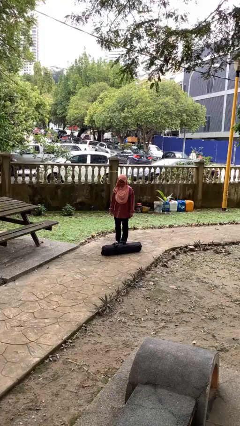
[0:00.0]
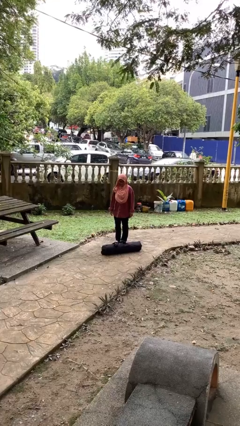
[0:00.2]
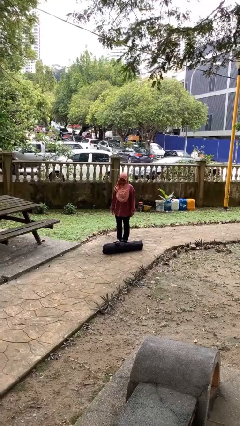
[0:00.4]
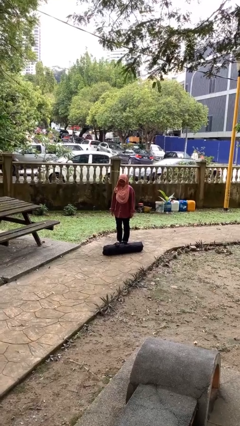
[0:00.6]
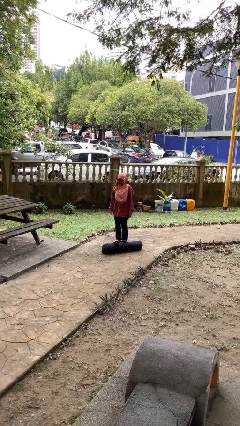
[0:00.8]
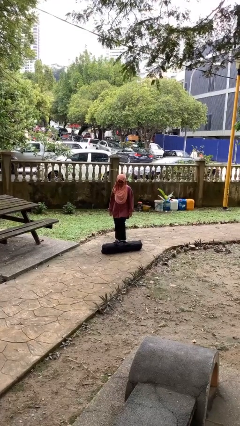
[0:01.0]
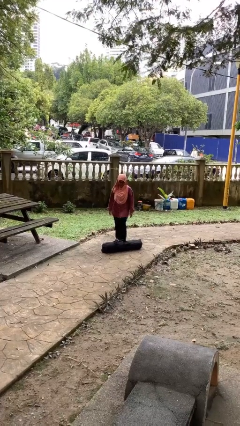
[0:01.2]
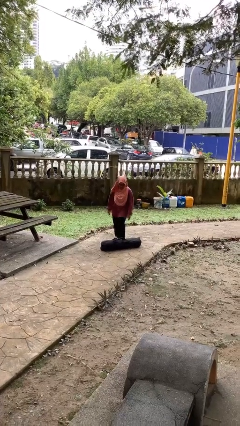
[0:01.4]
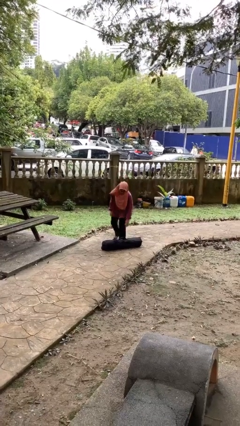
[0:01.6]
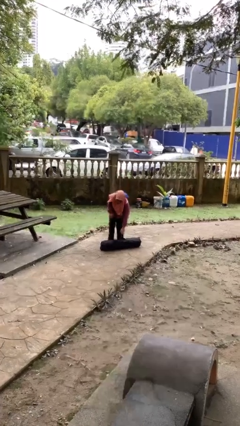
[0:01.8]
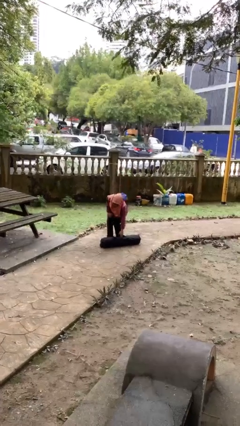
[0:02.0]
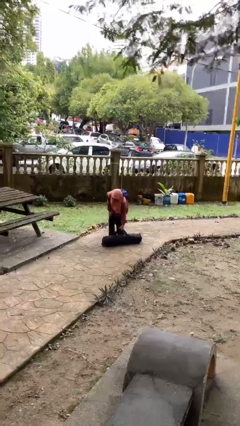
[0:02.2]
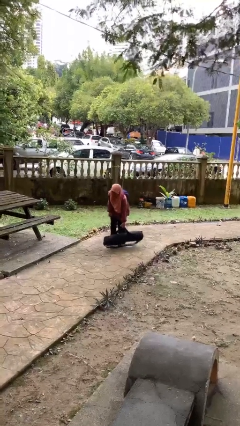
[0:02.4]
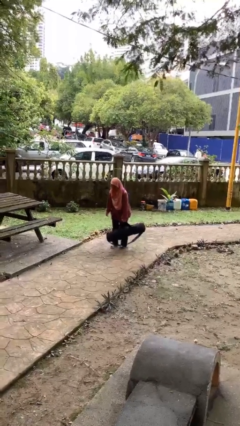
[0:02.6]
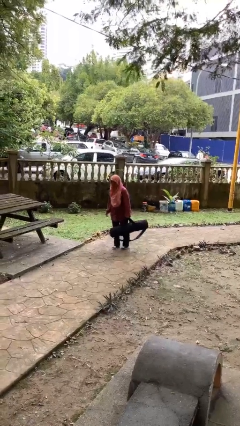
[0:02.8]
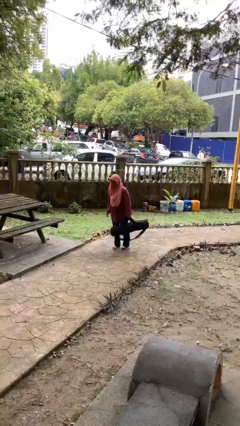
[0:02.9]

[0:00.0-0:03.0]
person picks up object from floor

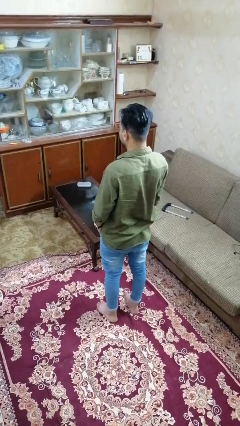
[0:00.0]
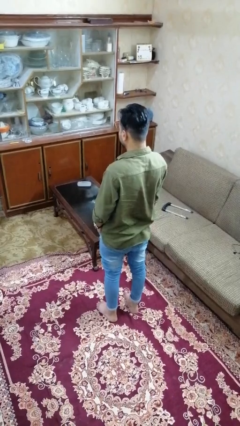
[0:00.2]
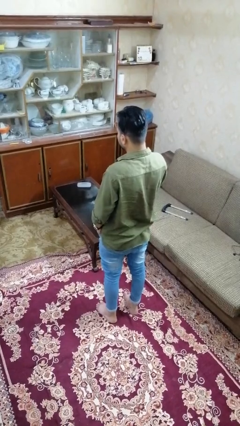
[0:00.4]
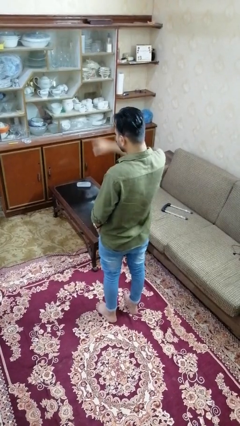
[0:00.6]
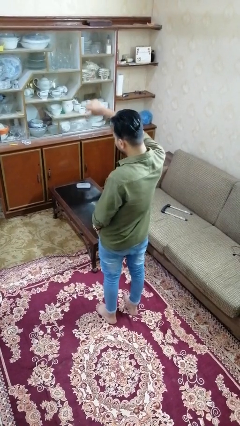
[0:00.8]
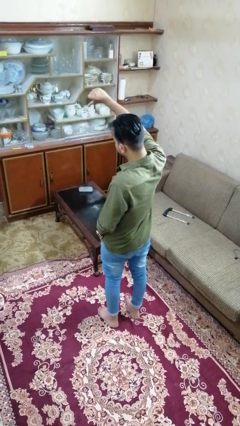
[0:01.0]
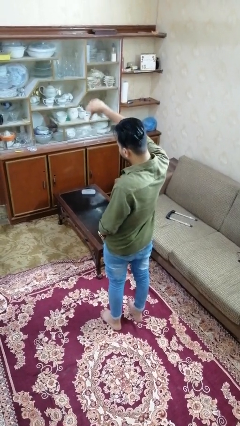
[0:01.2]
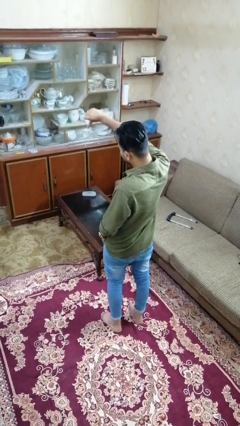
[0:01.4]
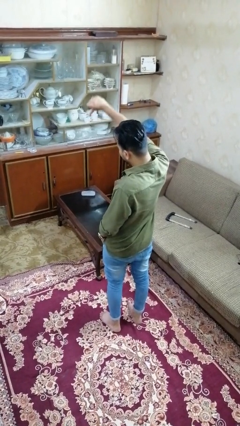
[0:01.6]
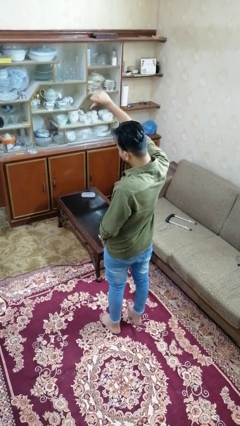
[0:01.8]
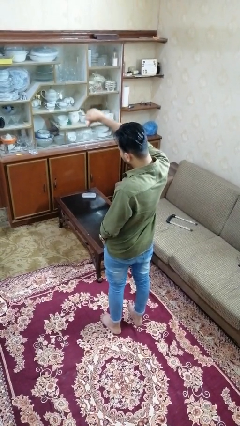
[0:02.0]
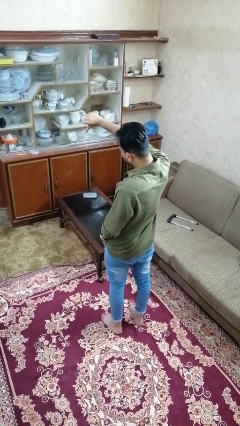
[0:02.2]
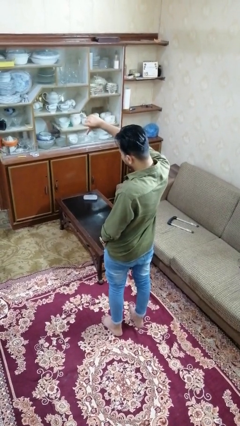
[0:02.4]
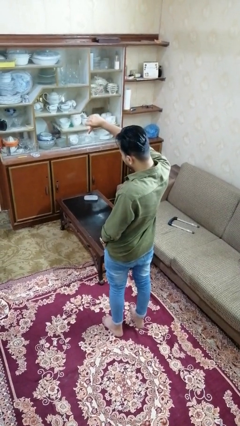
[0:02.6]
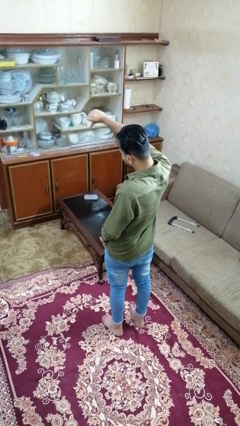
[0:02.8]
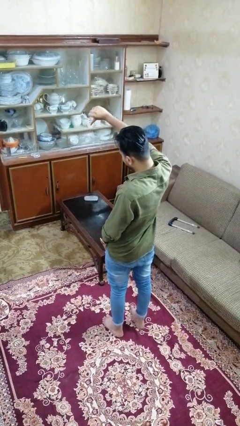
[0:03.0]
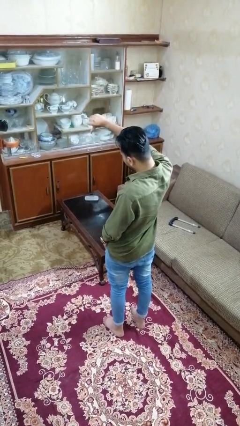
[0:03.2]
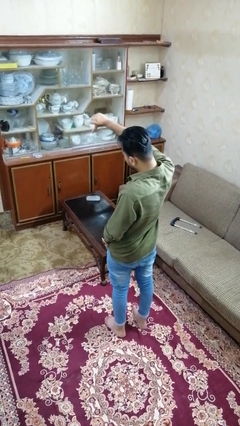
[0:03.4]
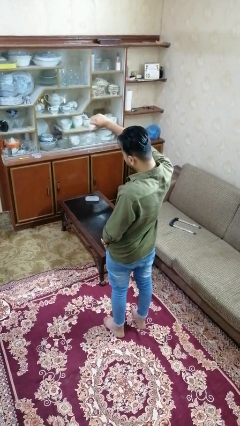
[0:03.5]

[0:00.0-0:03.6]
person gestures thumbs down

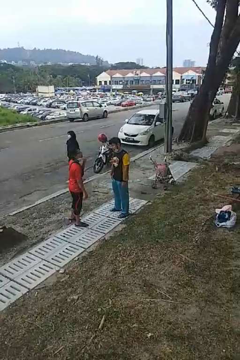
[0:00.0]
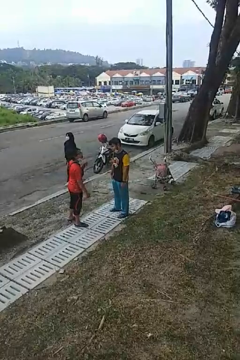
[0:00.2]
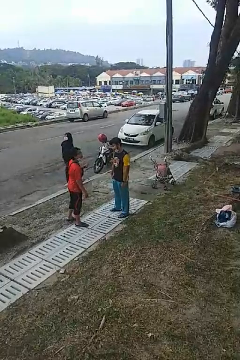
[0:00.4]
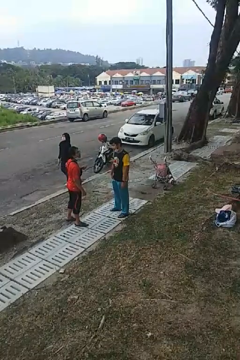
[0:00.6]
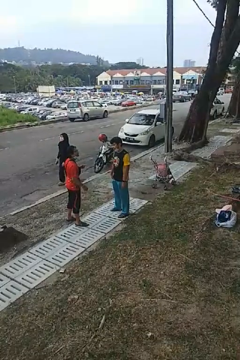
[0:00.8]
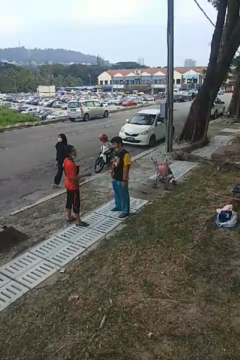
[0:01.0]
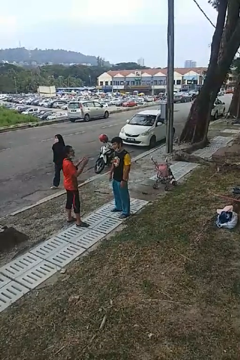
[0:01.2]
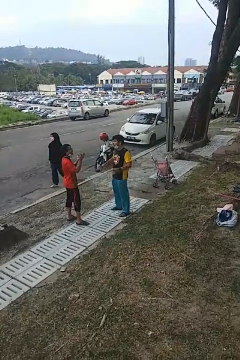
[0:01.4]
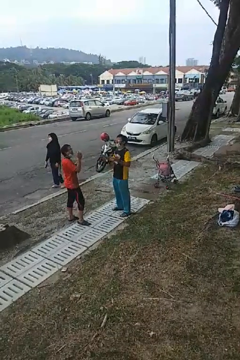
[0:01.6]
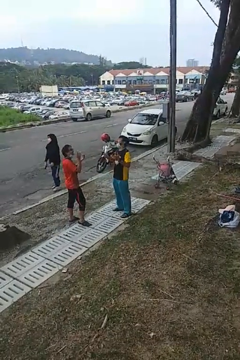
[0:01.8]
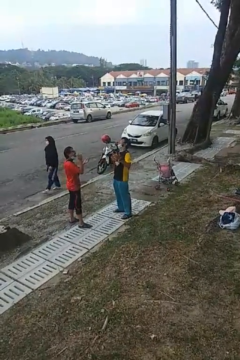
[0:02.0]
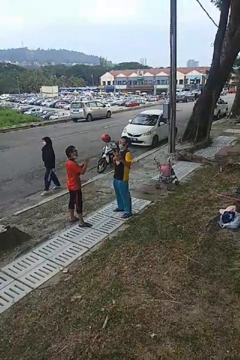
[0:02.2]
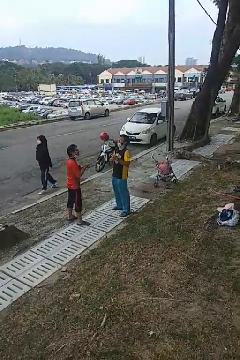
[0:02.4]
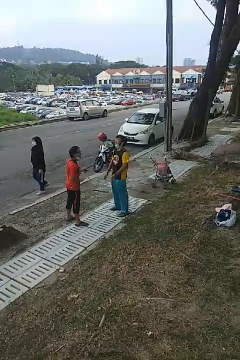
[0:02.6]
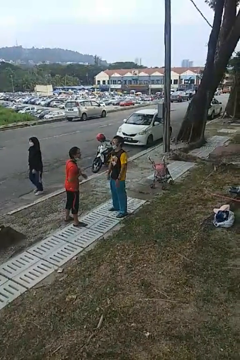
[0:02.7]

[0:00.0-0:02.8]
person laughs with person

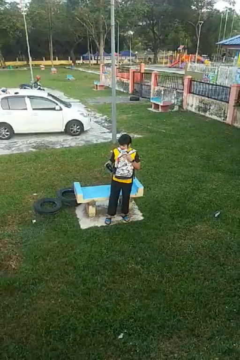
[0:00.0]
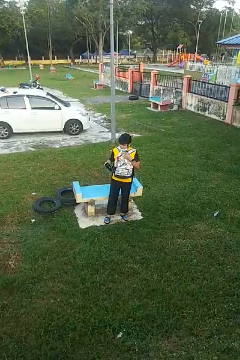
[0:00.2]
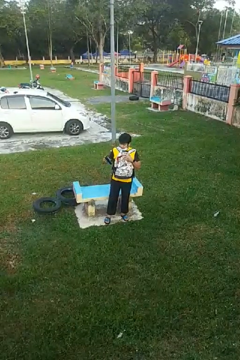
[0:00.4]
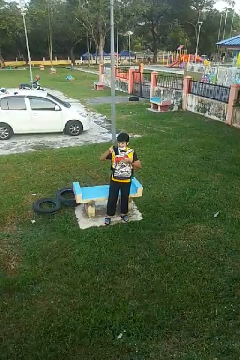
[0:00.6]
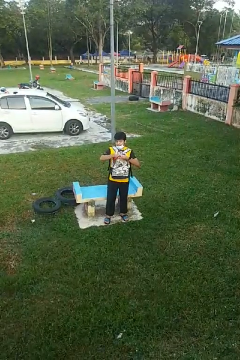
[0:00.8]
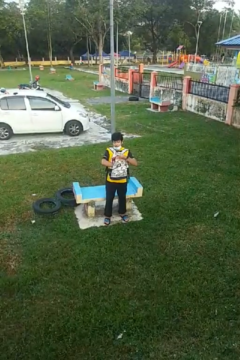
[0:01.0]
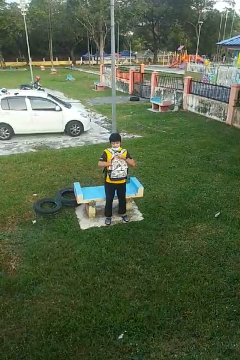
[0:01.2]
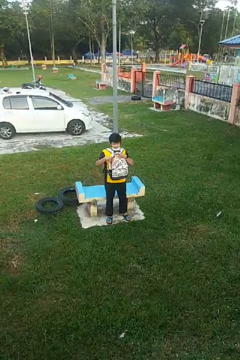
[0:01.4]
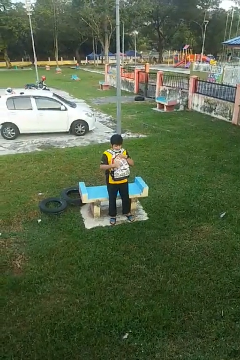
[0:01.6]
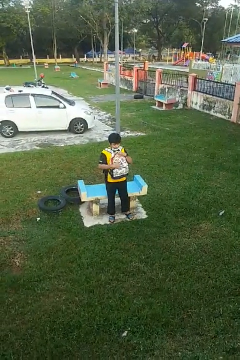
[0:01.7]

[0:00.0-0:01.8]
person puts object into backpack

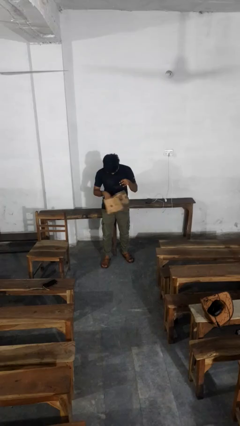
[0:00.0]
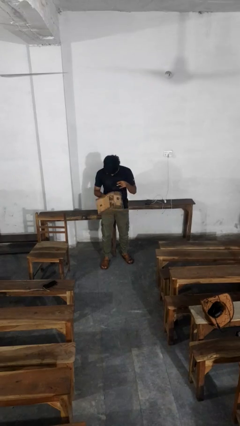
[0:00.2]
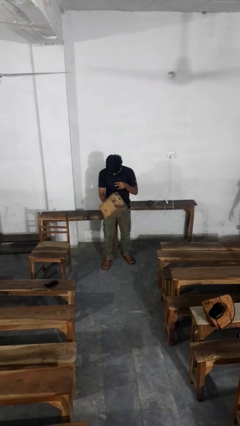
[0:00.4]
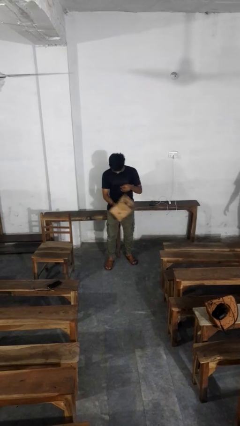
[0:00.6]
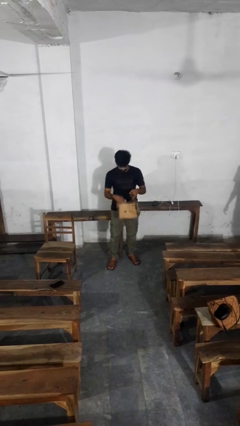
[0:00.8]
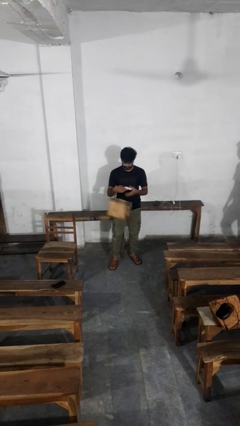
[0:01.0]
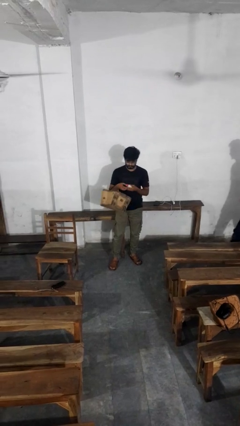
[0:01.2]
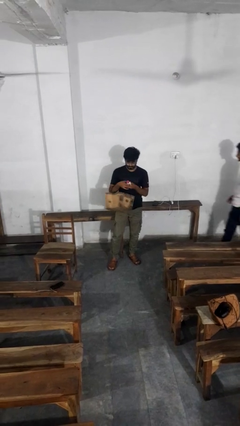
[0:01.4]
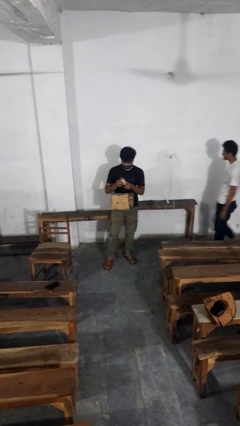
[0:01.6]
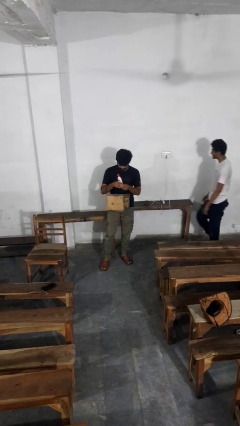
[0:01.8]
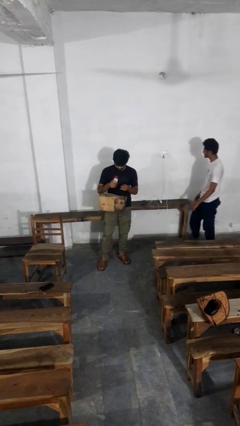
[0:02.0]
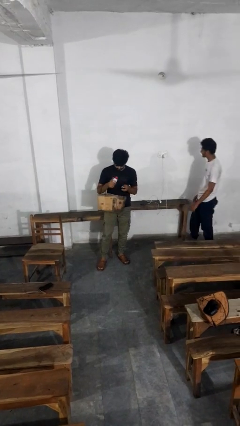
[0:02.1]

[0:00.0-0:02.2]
person takes object from purse

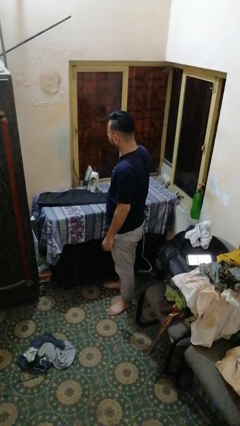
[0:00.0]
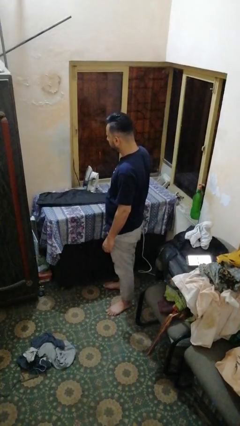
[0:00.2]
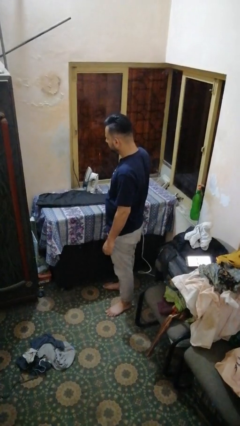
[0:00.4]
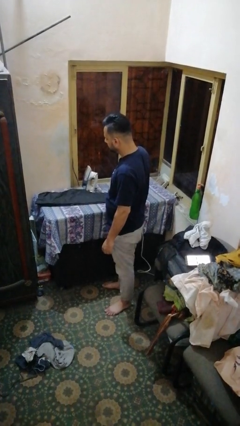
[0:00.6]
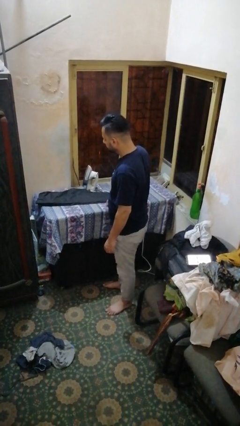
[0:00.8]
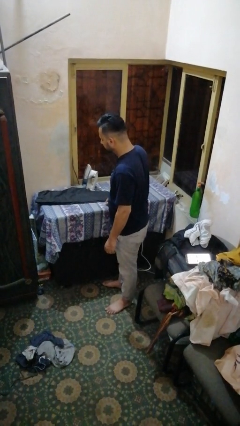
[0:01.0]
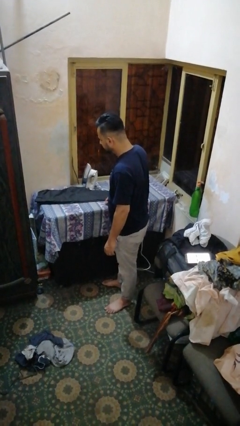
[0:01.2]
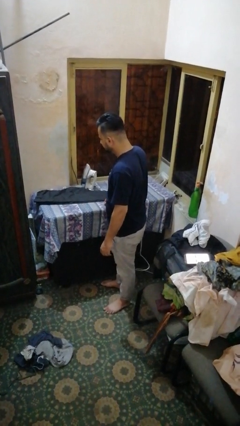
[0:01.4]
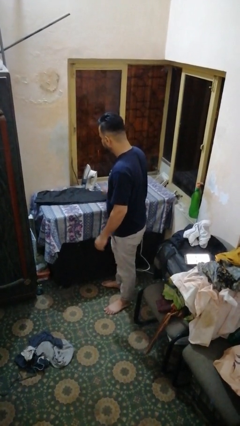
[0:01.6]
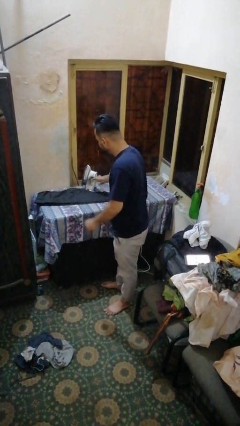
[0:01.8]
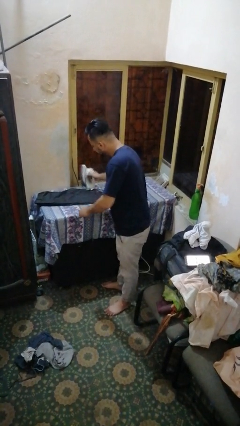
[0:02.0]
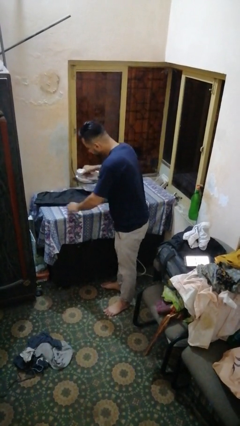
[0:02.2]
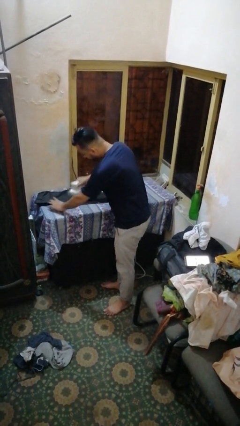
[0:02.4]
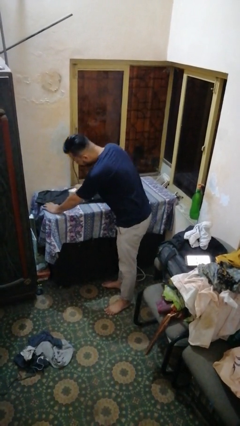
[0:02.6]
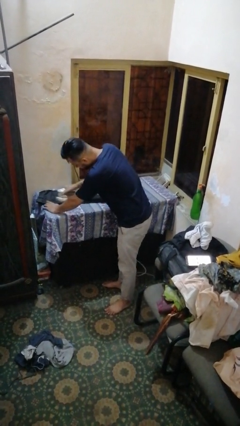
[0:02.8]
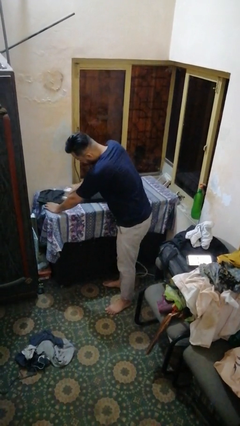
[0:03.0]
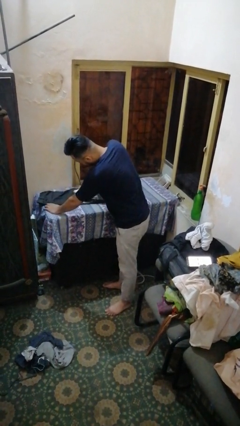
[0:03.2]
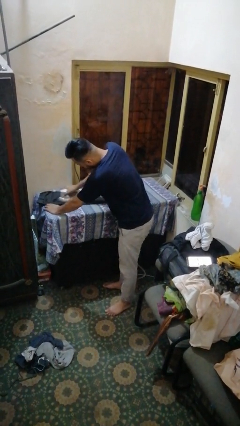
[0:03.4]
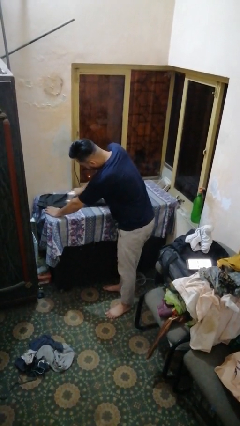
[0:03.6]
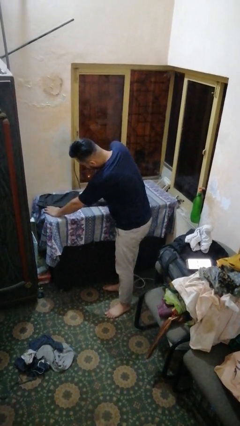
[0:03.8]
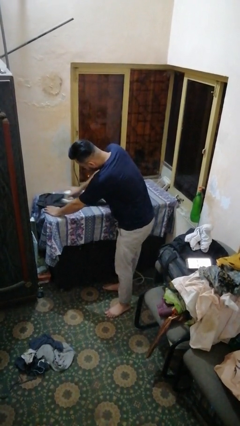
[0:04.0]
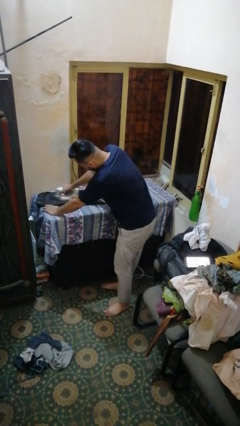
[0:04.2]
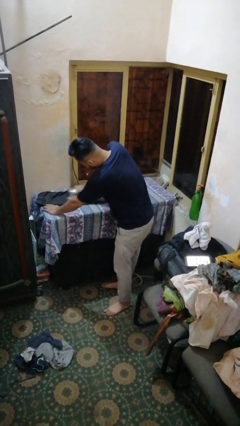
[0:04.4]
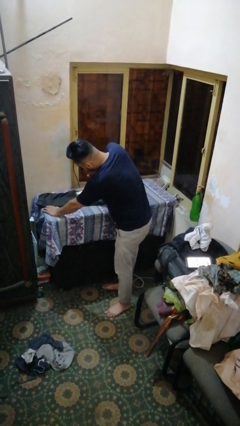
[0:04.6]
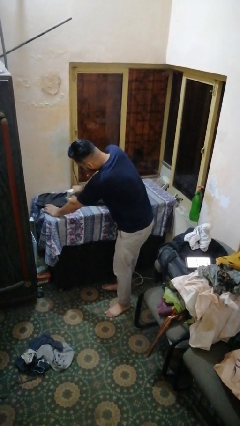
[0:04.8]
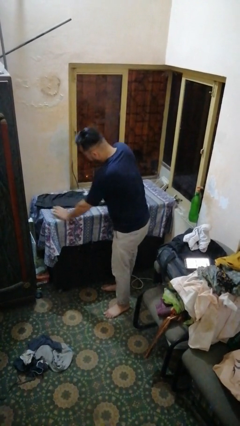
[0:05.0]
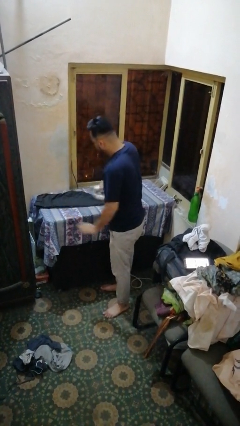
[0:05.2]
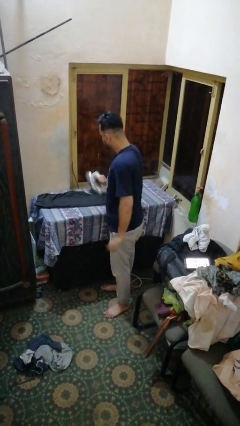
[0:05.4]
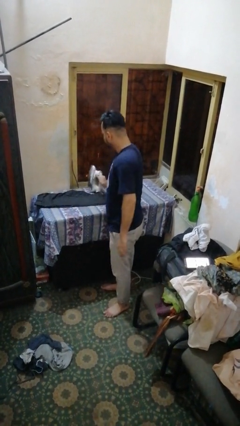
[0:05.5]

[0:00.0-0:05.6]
person irons clothes
